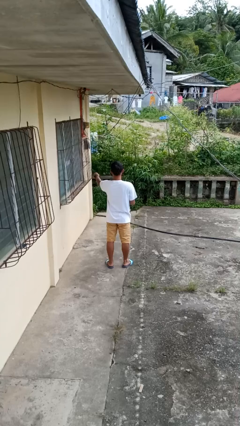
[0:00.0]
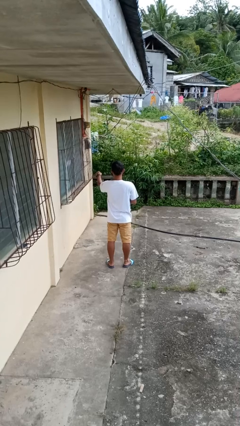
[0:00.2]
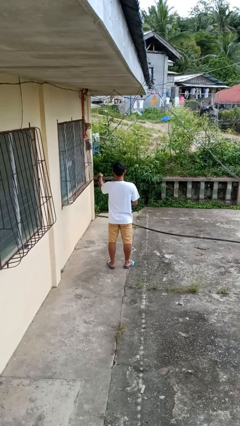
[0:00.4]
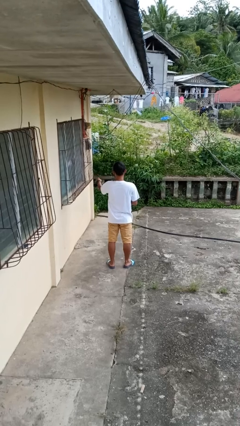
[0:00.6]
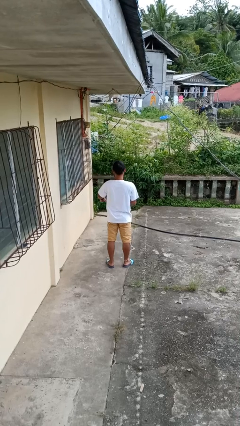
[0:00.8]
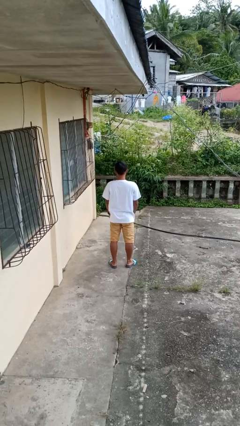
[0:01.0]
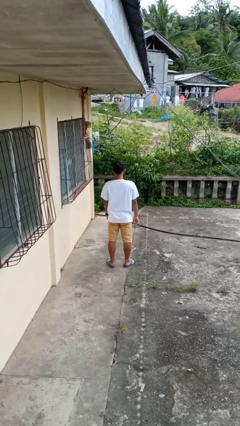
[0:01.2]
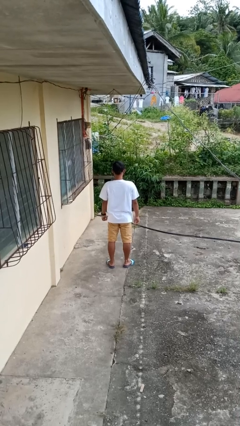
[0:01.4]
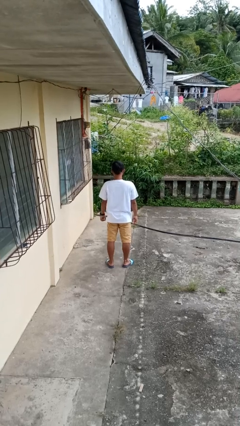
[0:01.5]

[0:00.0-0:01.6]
person punches

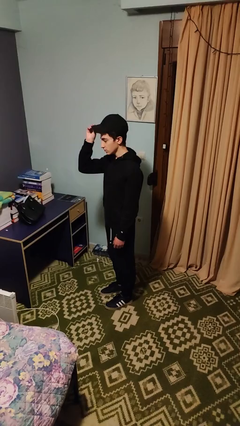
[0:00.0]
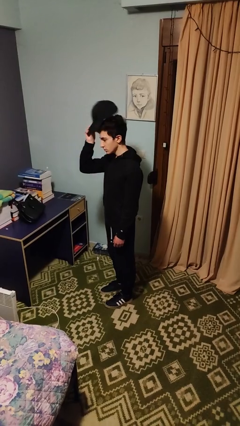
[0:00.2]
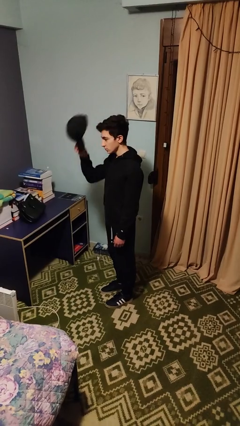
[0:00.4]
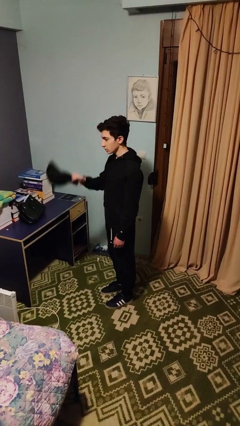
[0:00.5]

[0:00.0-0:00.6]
person takes off hat

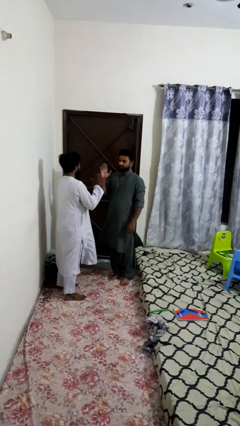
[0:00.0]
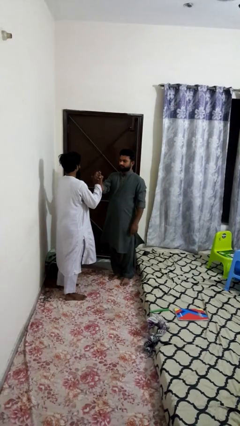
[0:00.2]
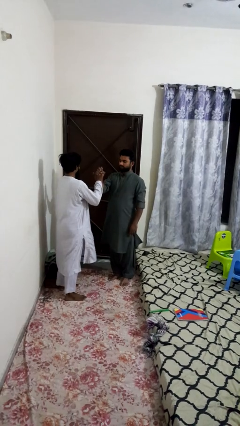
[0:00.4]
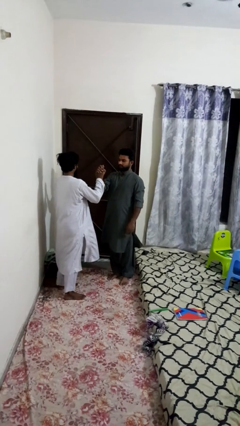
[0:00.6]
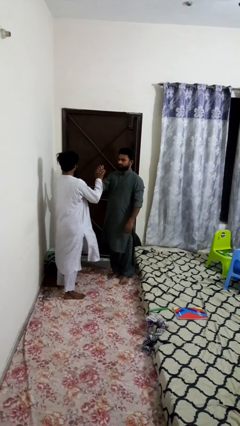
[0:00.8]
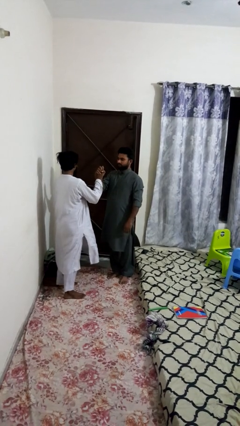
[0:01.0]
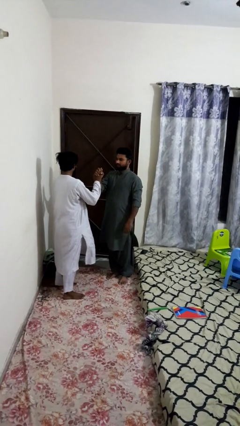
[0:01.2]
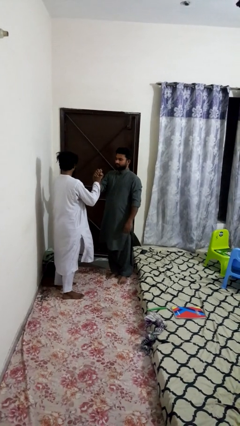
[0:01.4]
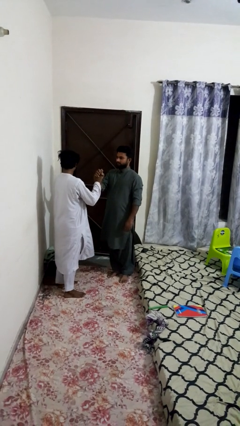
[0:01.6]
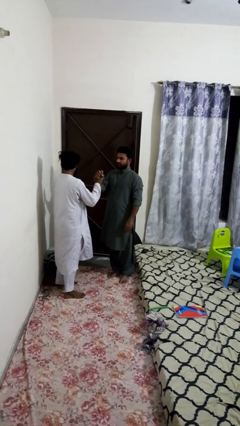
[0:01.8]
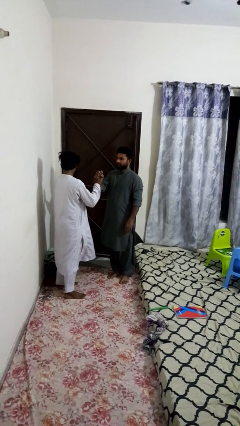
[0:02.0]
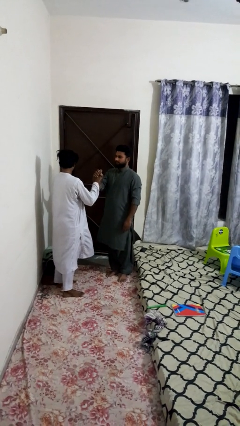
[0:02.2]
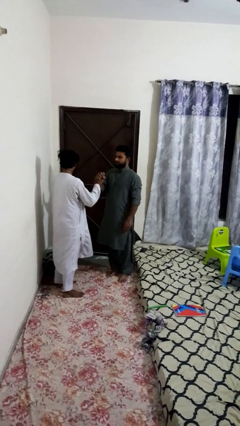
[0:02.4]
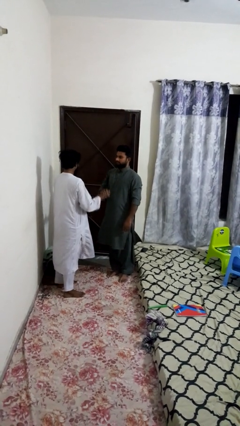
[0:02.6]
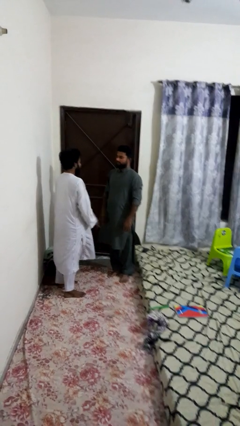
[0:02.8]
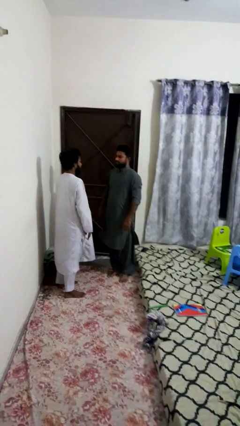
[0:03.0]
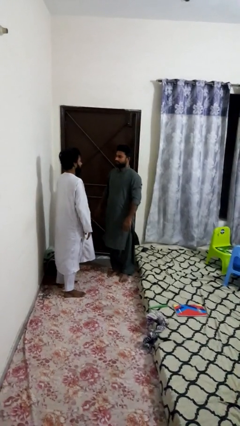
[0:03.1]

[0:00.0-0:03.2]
person highfives hand

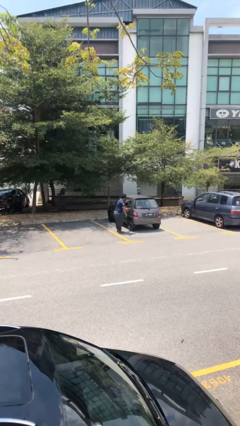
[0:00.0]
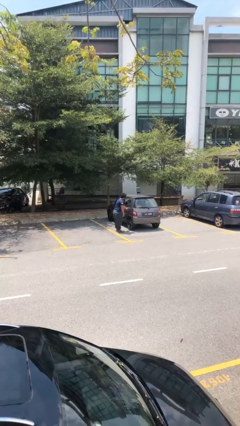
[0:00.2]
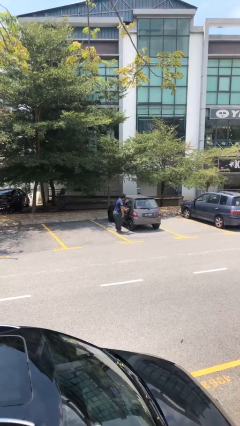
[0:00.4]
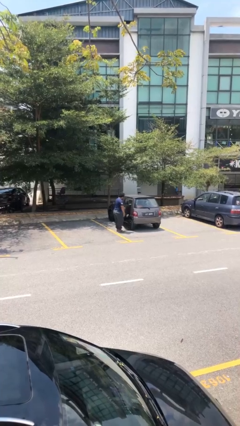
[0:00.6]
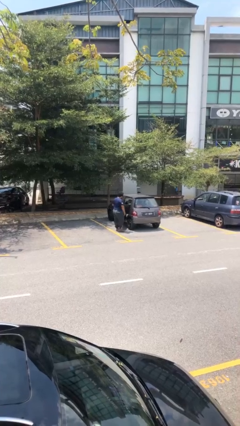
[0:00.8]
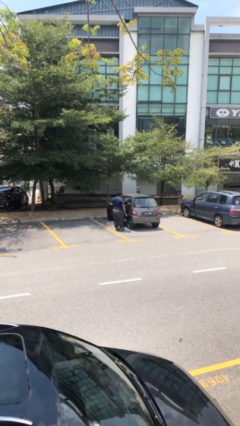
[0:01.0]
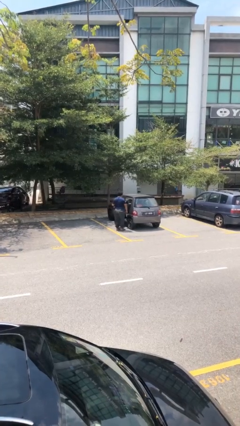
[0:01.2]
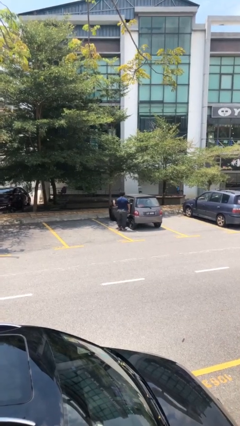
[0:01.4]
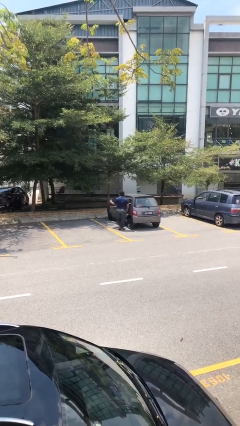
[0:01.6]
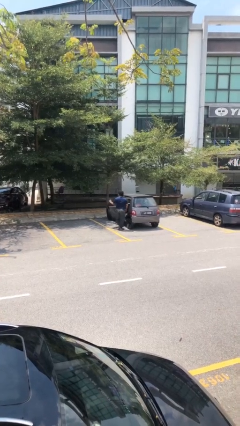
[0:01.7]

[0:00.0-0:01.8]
person opens car door

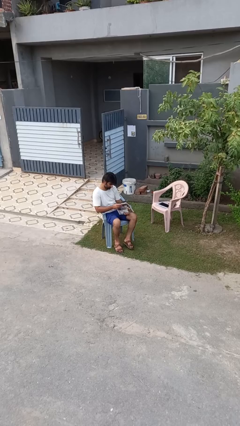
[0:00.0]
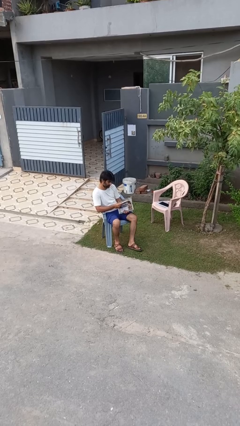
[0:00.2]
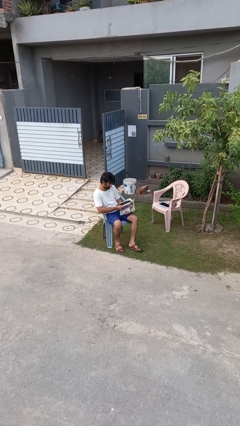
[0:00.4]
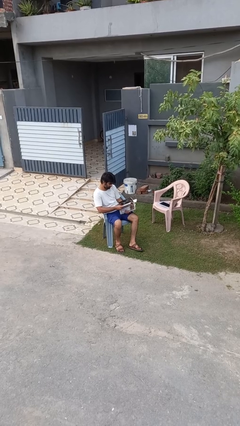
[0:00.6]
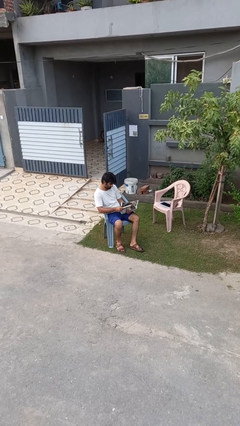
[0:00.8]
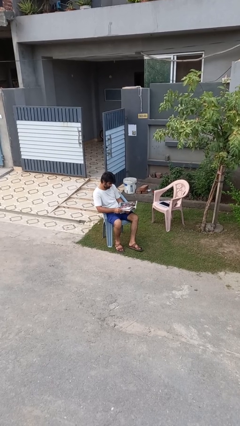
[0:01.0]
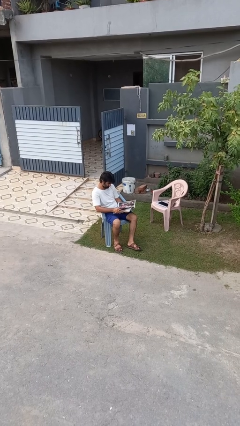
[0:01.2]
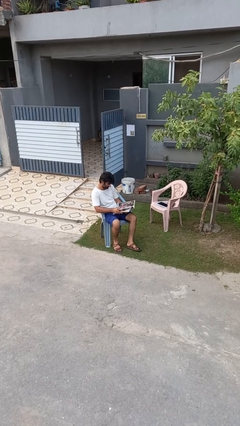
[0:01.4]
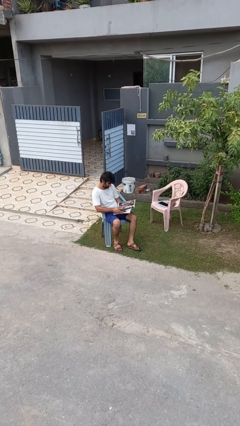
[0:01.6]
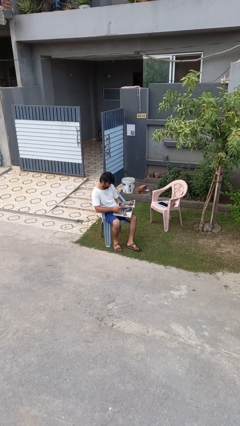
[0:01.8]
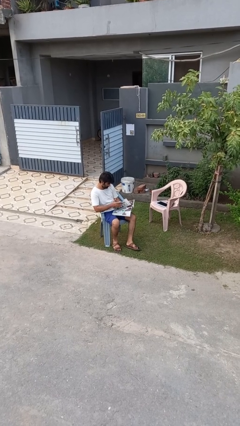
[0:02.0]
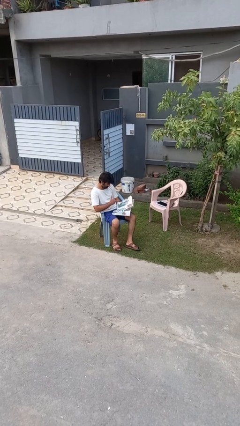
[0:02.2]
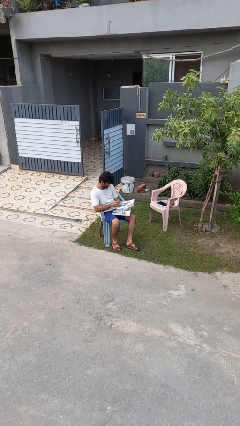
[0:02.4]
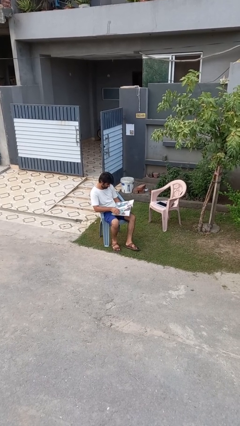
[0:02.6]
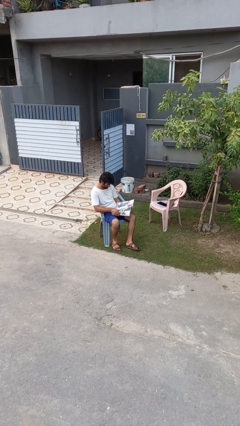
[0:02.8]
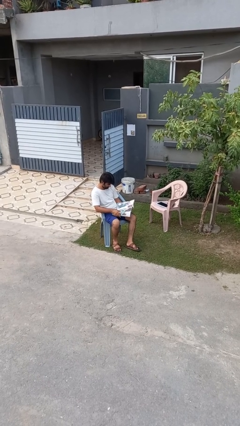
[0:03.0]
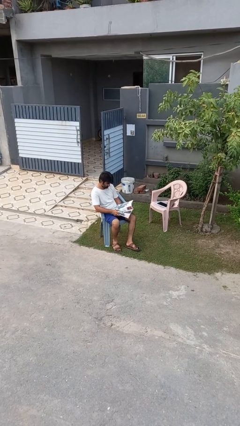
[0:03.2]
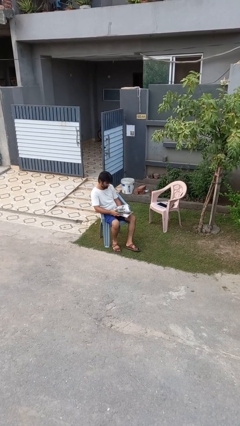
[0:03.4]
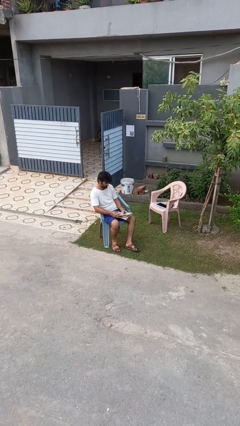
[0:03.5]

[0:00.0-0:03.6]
person reads magazine

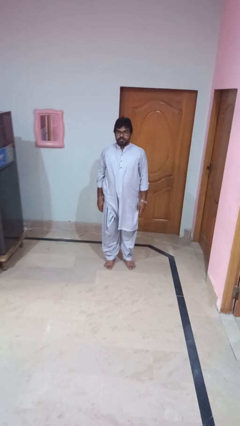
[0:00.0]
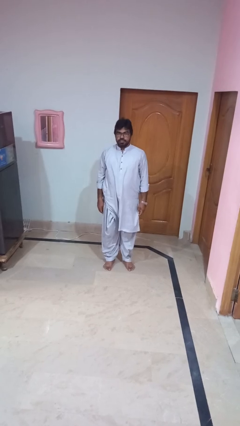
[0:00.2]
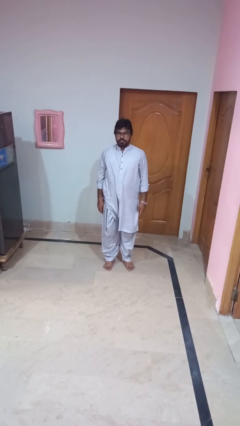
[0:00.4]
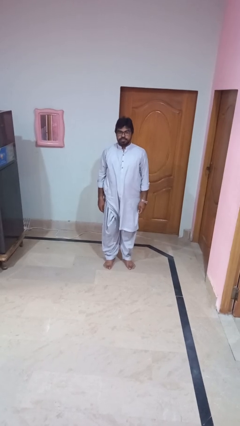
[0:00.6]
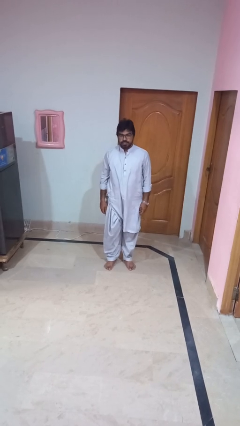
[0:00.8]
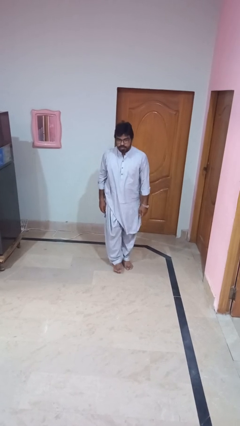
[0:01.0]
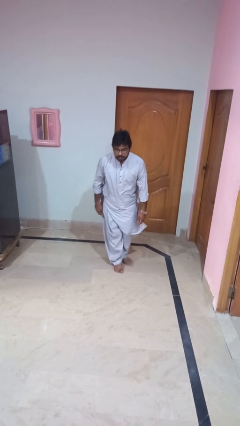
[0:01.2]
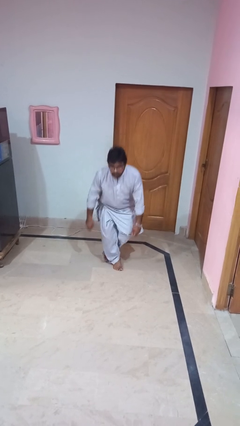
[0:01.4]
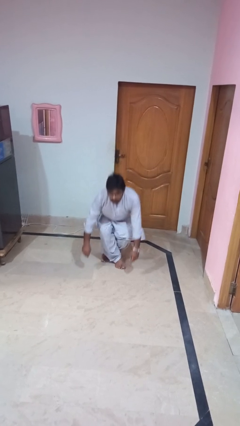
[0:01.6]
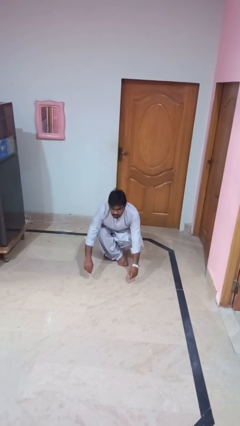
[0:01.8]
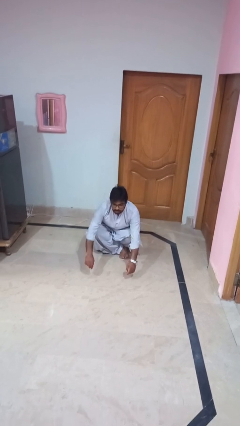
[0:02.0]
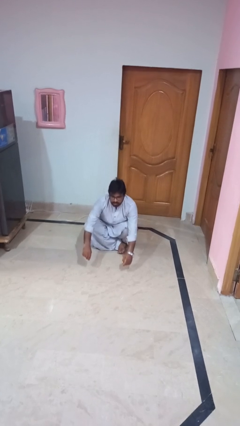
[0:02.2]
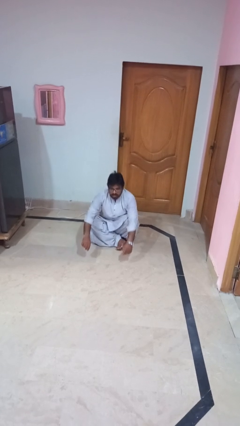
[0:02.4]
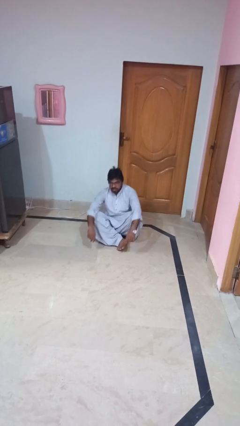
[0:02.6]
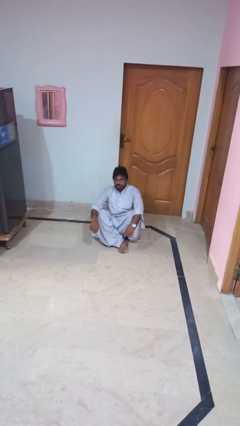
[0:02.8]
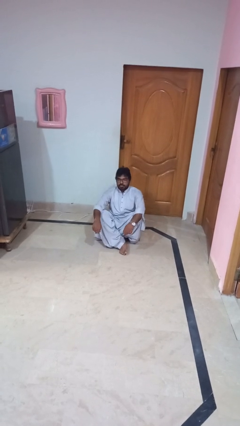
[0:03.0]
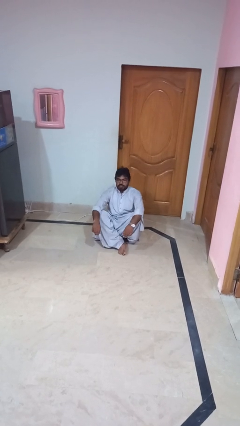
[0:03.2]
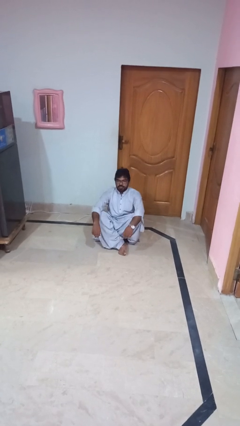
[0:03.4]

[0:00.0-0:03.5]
person sits crisscross

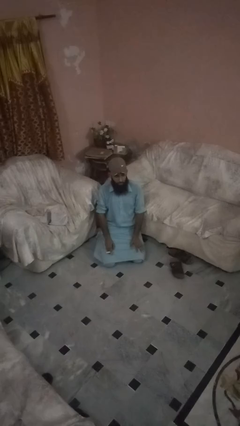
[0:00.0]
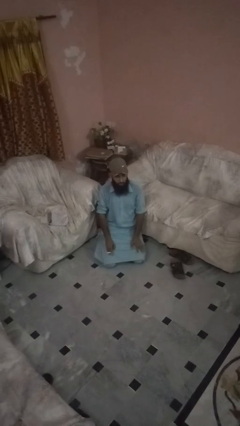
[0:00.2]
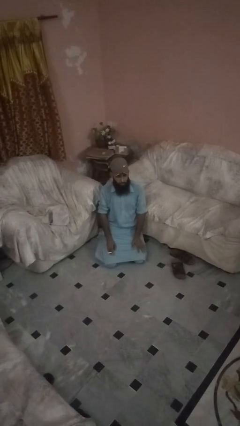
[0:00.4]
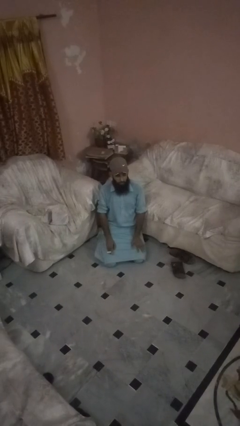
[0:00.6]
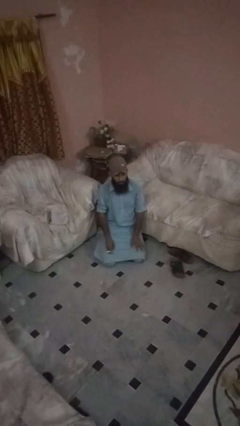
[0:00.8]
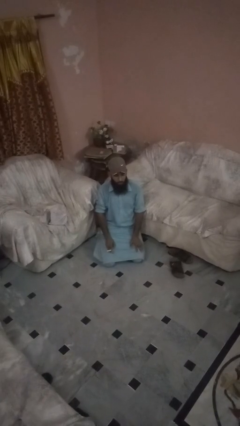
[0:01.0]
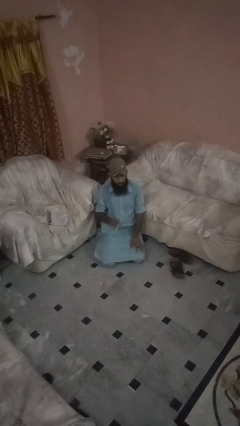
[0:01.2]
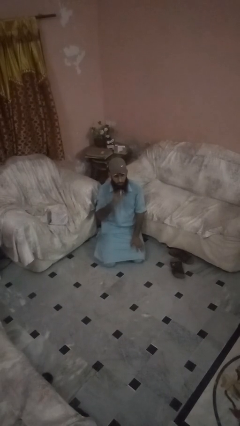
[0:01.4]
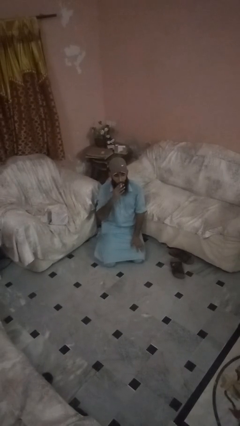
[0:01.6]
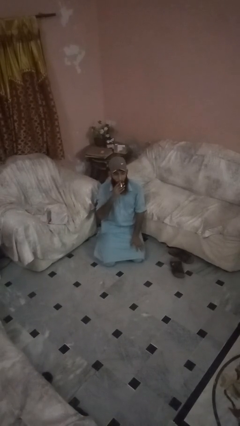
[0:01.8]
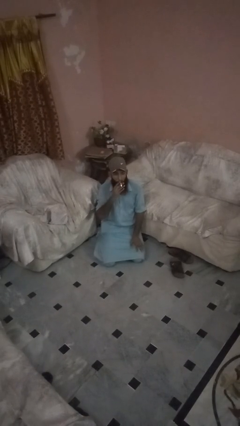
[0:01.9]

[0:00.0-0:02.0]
person vapes

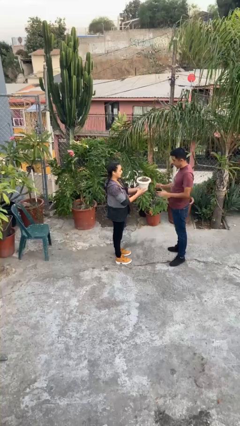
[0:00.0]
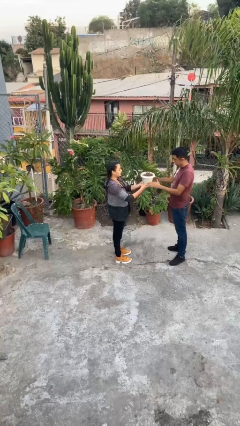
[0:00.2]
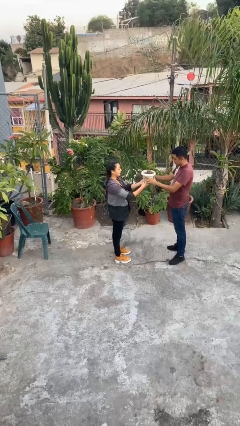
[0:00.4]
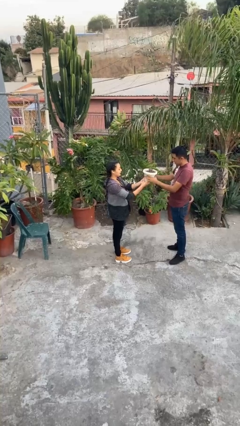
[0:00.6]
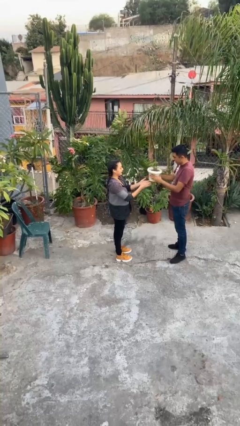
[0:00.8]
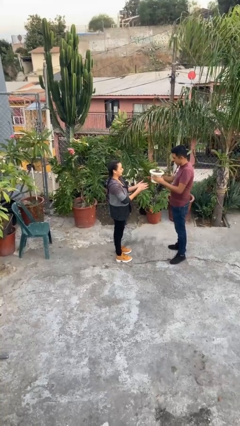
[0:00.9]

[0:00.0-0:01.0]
person transfers object to person
